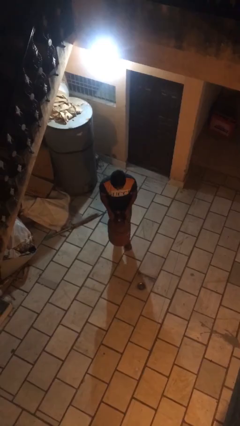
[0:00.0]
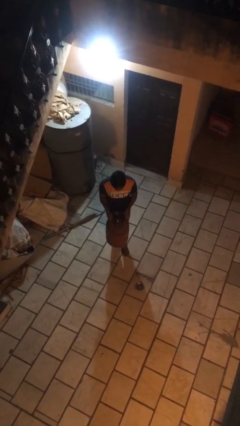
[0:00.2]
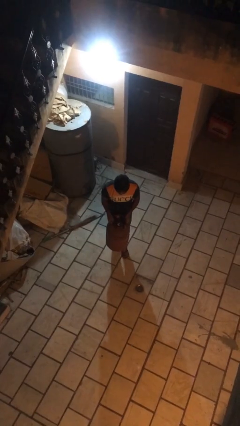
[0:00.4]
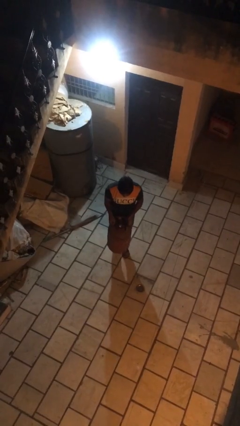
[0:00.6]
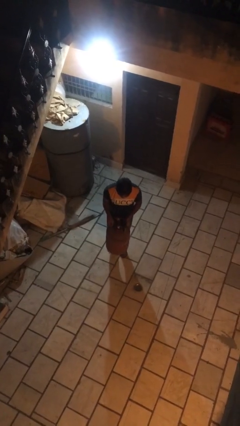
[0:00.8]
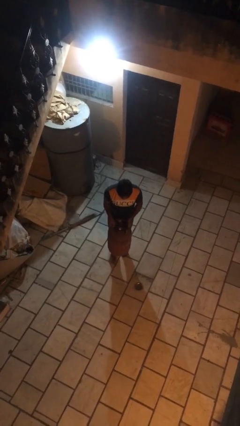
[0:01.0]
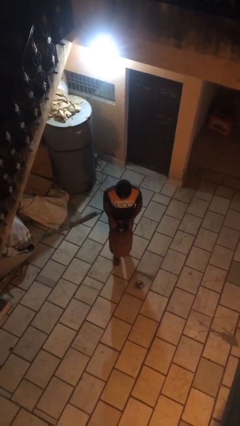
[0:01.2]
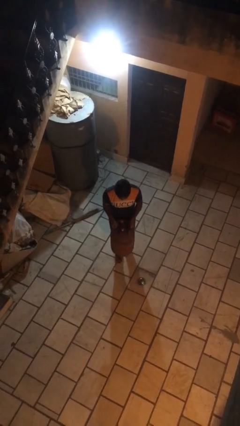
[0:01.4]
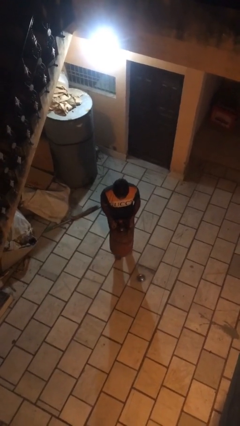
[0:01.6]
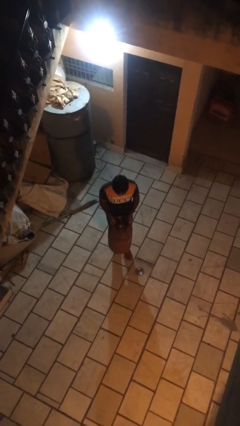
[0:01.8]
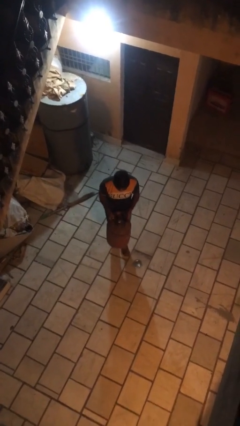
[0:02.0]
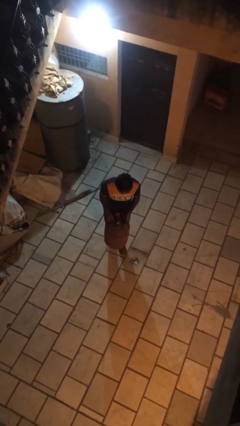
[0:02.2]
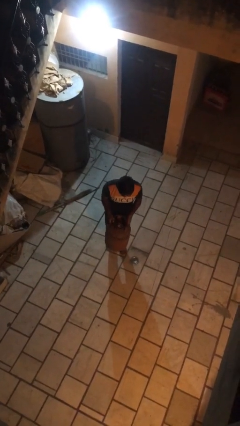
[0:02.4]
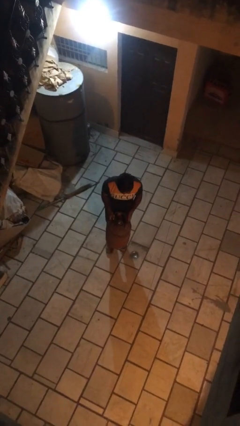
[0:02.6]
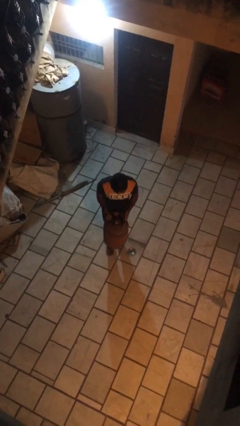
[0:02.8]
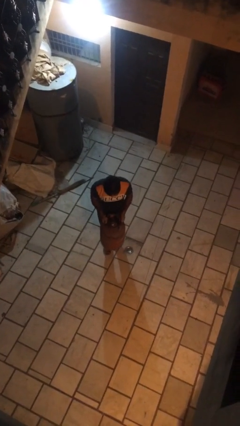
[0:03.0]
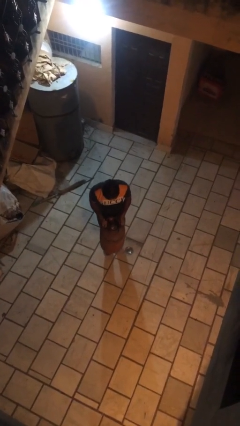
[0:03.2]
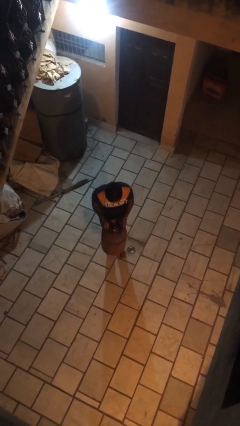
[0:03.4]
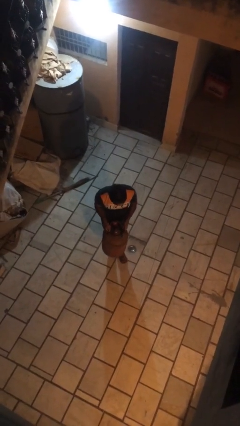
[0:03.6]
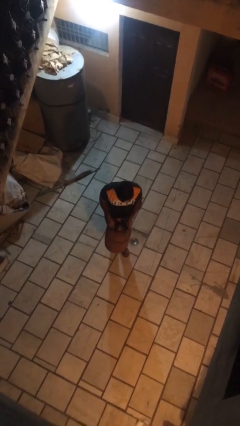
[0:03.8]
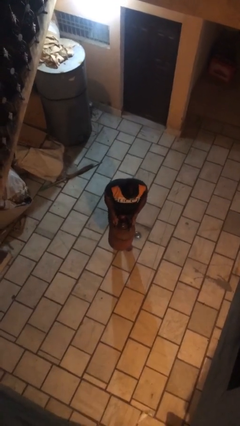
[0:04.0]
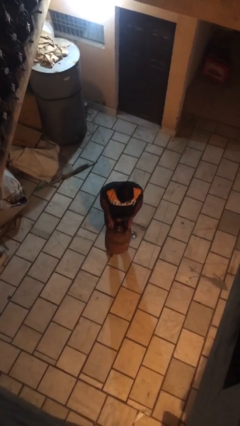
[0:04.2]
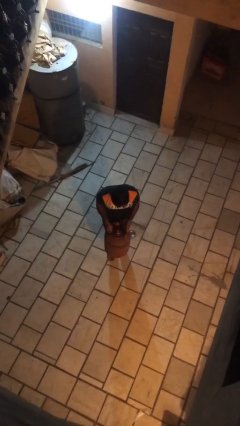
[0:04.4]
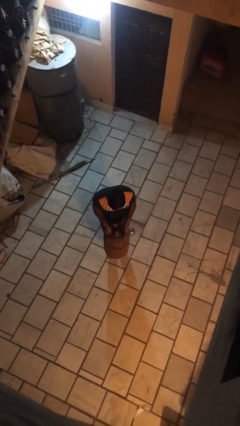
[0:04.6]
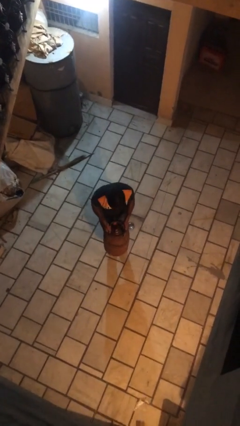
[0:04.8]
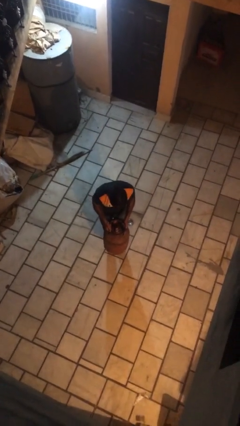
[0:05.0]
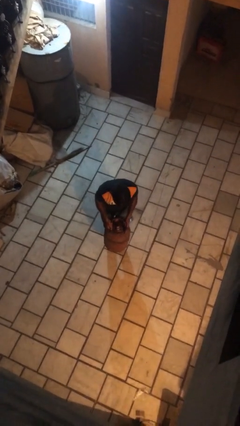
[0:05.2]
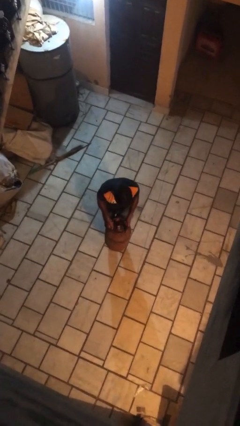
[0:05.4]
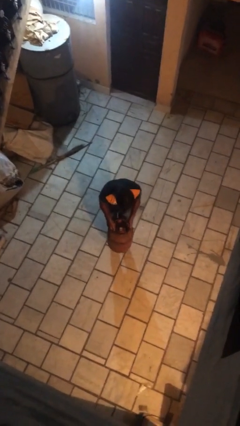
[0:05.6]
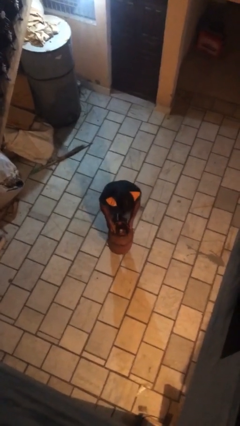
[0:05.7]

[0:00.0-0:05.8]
person carries heavy object

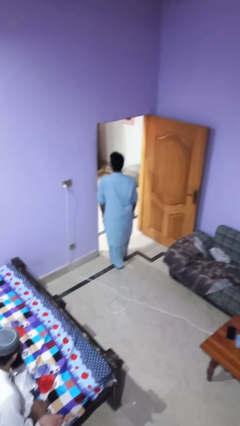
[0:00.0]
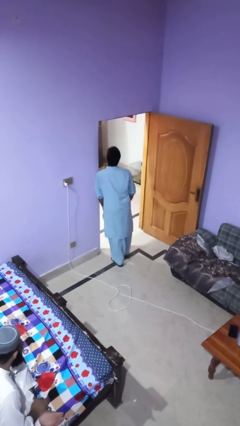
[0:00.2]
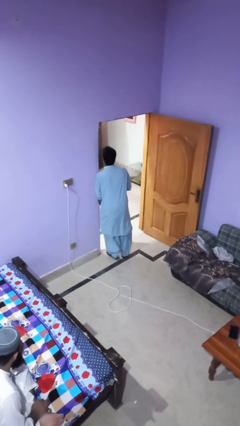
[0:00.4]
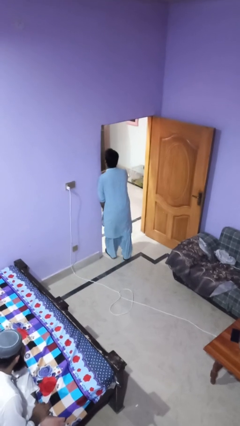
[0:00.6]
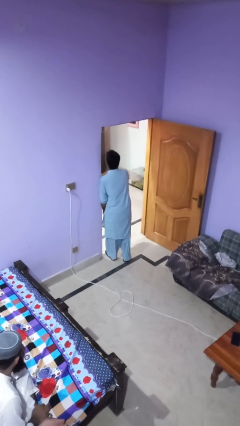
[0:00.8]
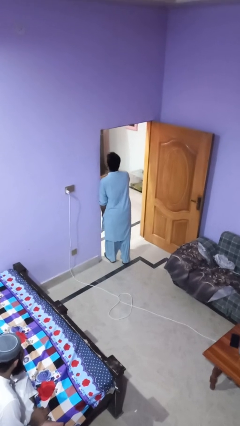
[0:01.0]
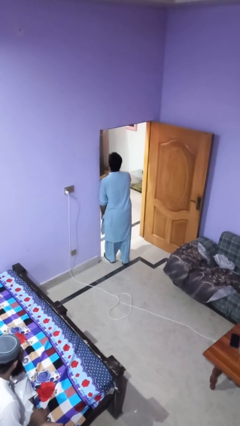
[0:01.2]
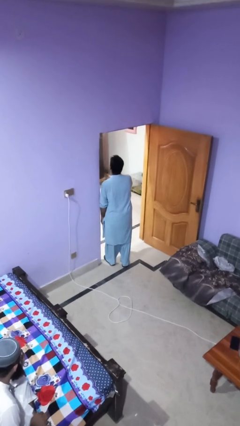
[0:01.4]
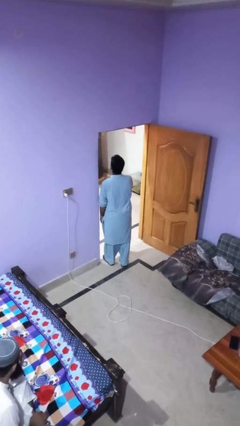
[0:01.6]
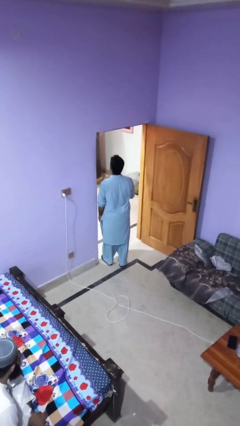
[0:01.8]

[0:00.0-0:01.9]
person bumps into wall

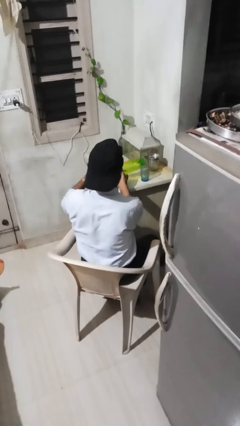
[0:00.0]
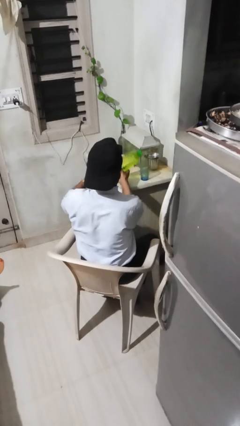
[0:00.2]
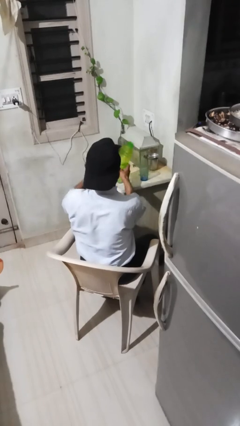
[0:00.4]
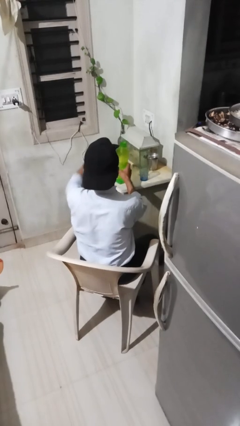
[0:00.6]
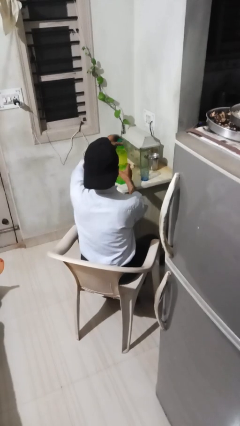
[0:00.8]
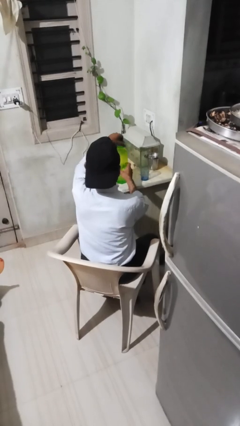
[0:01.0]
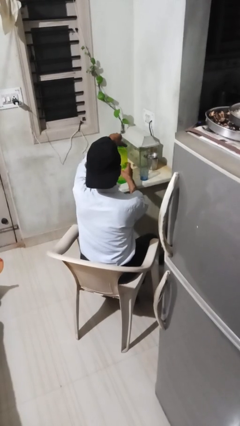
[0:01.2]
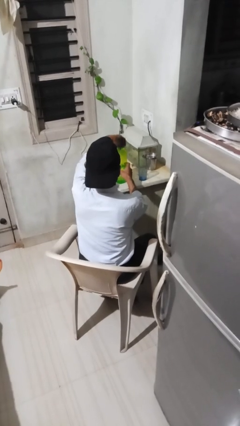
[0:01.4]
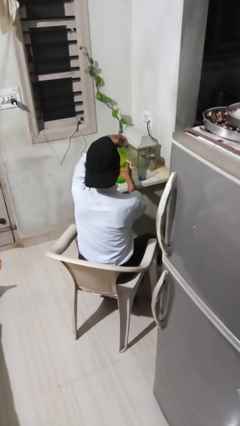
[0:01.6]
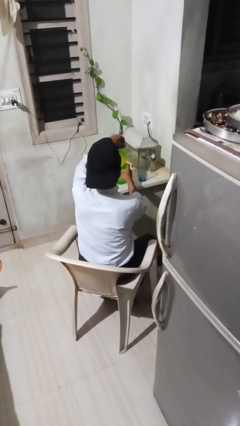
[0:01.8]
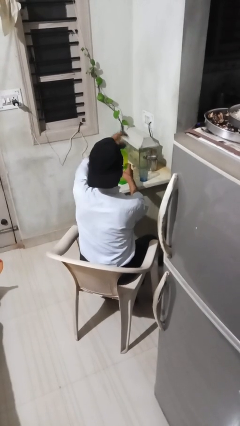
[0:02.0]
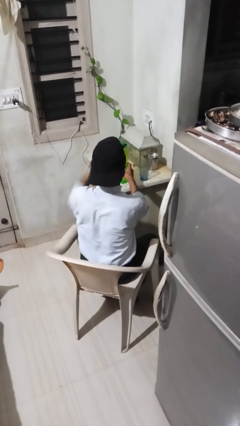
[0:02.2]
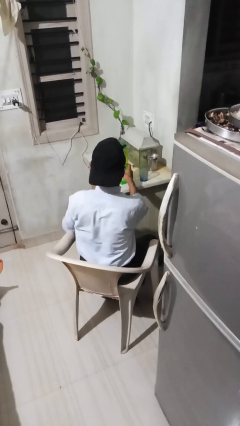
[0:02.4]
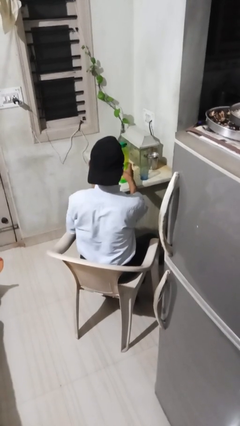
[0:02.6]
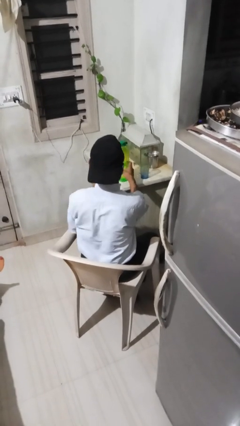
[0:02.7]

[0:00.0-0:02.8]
person screws lid to bottle

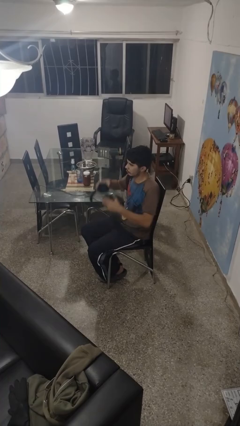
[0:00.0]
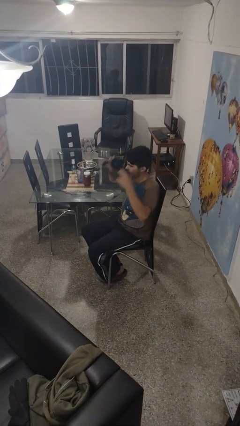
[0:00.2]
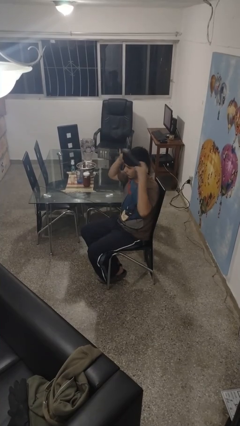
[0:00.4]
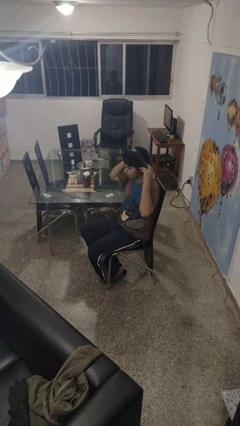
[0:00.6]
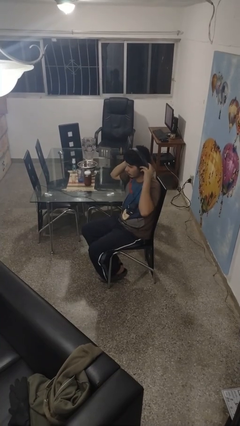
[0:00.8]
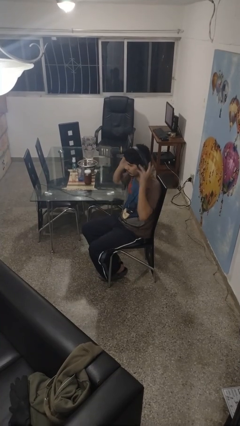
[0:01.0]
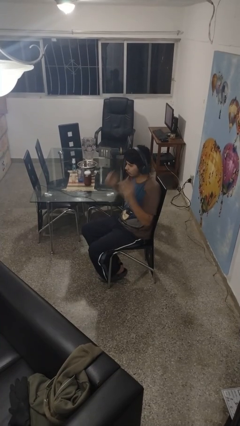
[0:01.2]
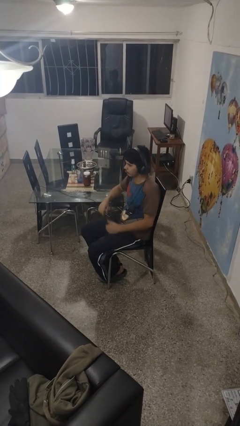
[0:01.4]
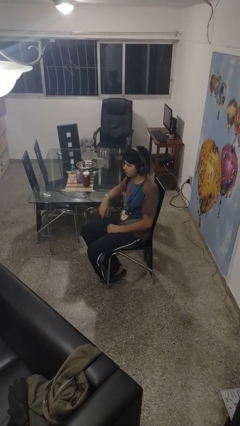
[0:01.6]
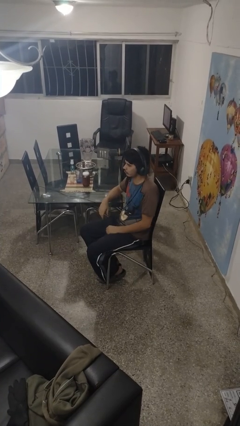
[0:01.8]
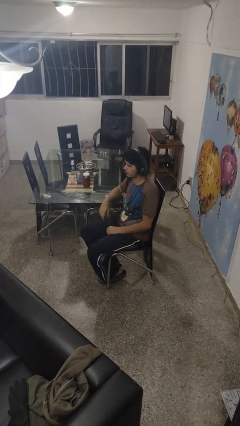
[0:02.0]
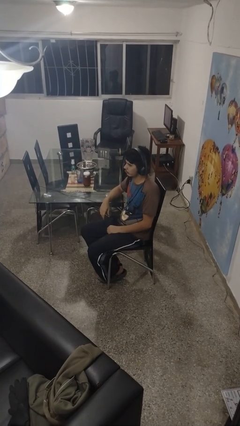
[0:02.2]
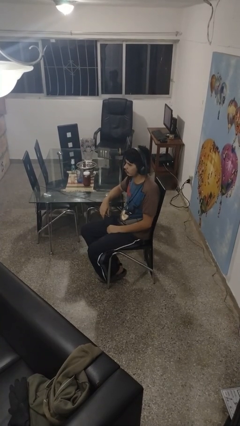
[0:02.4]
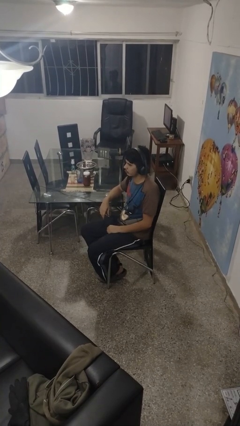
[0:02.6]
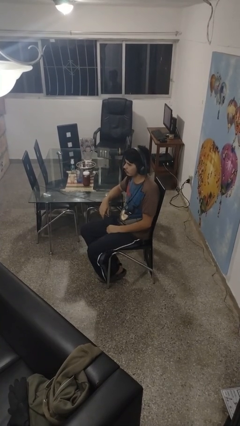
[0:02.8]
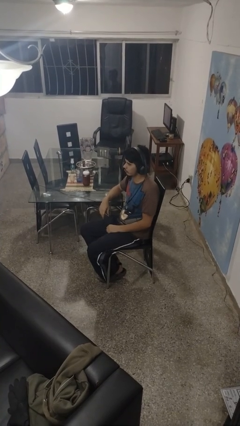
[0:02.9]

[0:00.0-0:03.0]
person puts on headphones

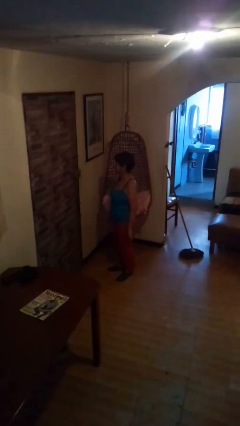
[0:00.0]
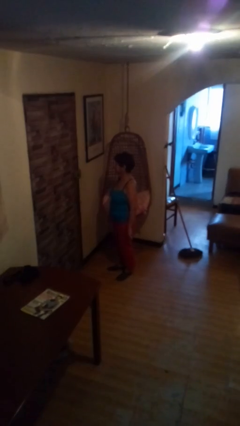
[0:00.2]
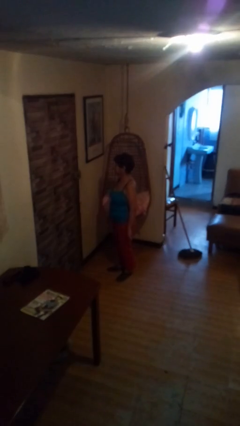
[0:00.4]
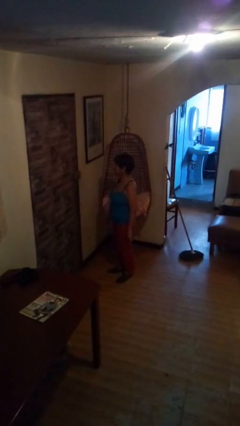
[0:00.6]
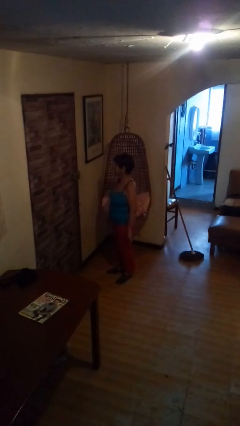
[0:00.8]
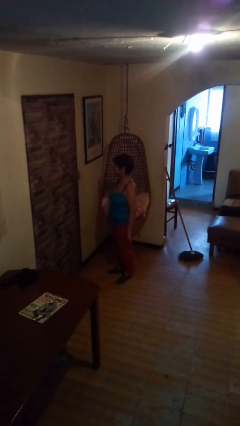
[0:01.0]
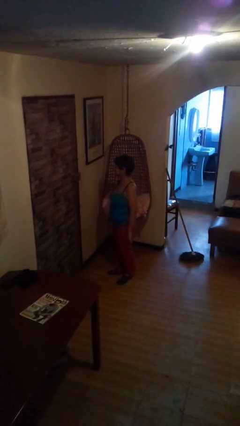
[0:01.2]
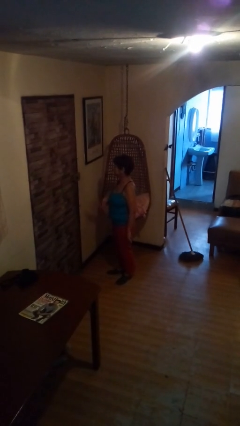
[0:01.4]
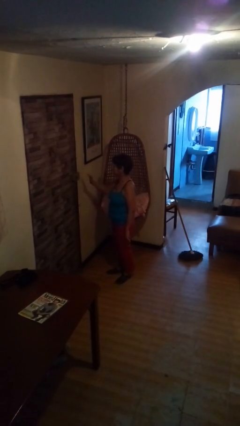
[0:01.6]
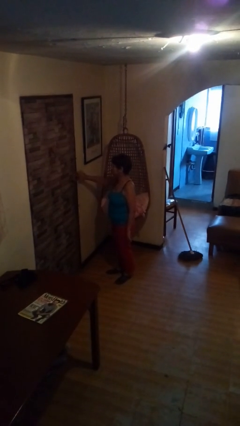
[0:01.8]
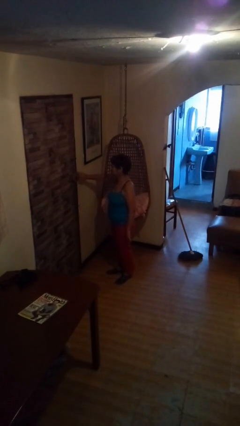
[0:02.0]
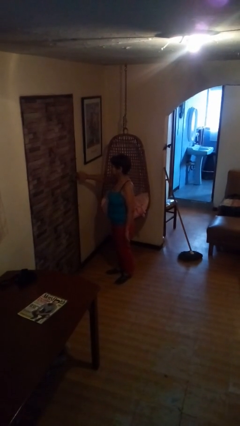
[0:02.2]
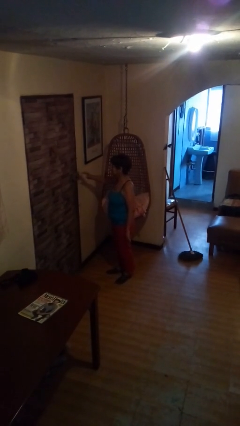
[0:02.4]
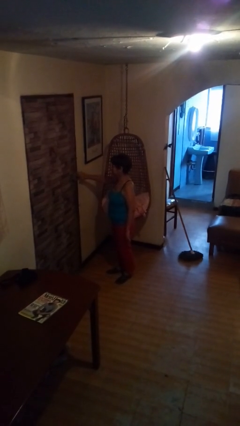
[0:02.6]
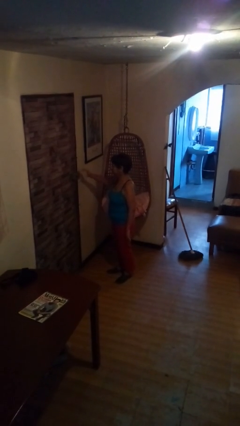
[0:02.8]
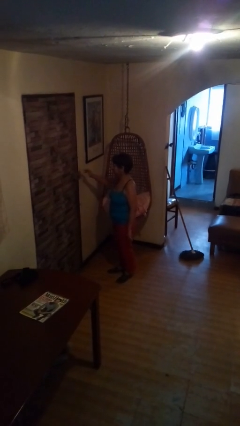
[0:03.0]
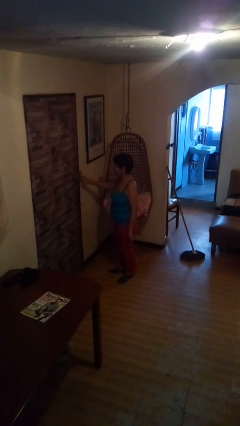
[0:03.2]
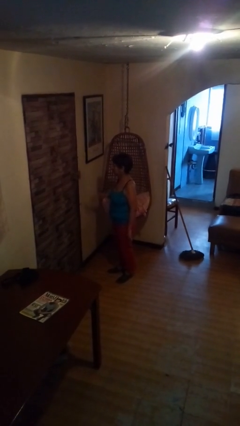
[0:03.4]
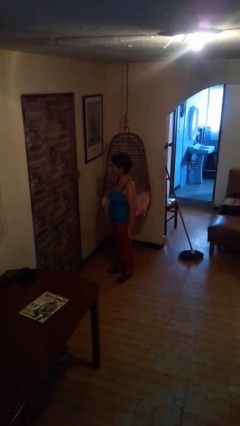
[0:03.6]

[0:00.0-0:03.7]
person taps object with finger

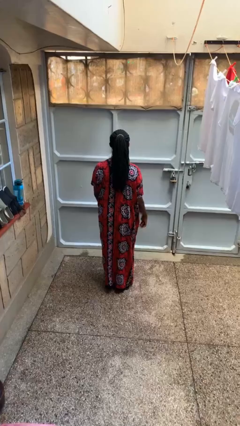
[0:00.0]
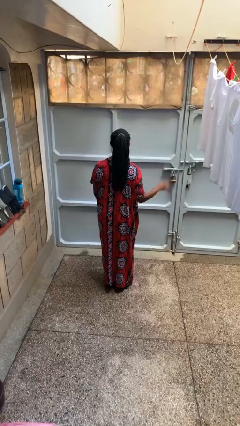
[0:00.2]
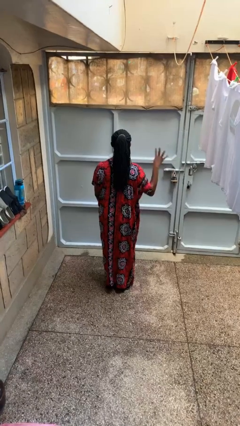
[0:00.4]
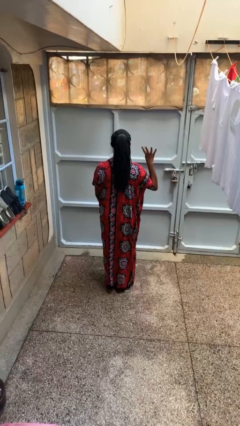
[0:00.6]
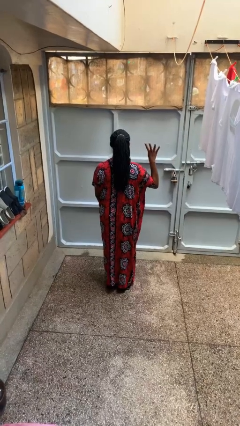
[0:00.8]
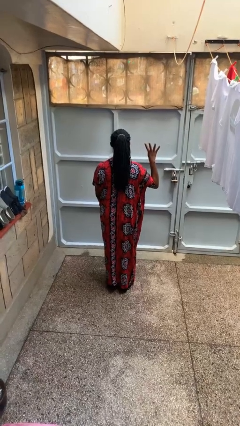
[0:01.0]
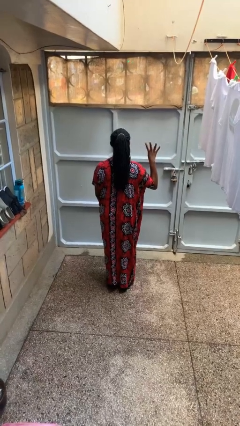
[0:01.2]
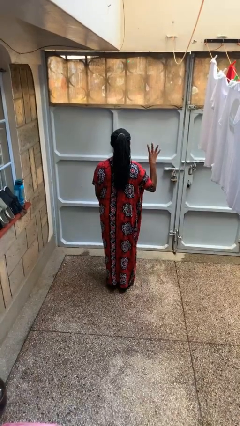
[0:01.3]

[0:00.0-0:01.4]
person gestures number four
